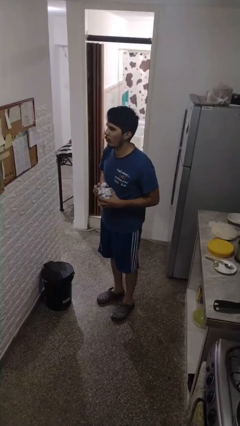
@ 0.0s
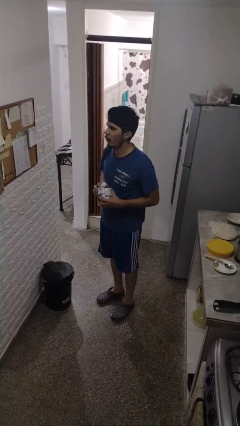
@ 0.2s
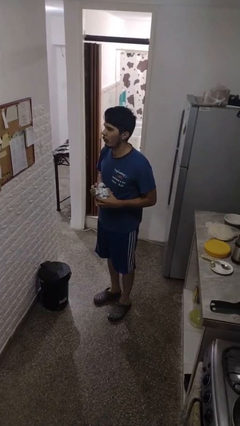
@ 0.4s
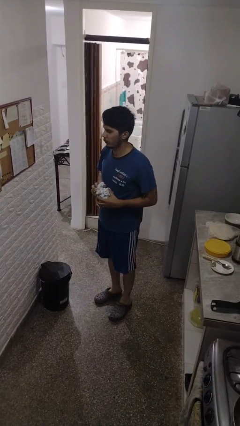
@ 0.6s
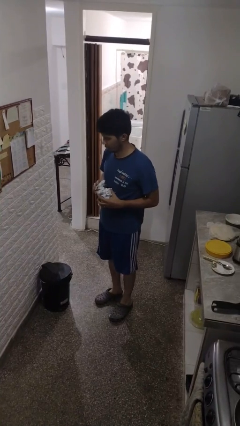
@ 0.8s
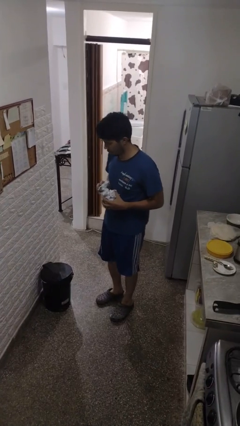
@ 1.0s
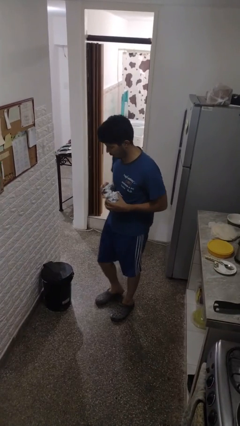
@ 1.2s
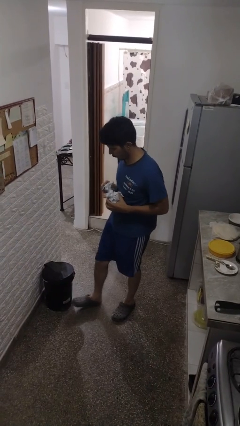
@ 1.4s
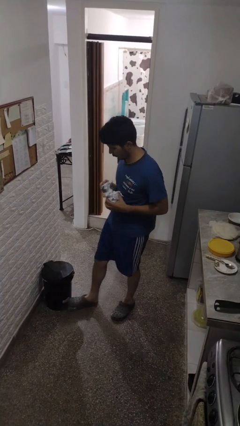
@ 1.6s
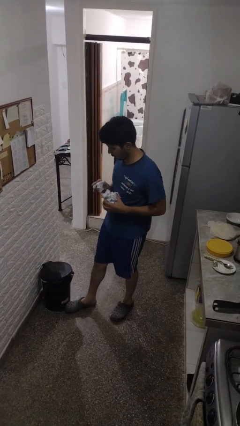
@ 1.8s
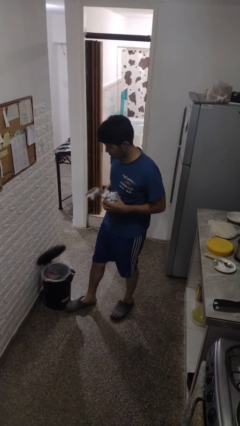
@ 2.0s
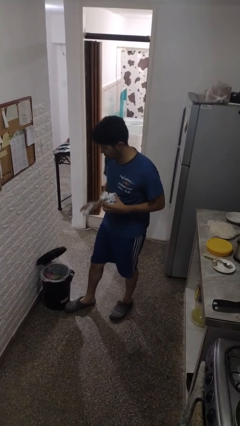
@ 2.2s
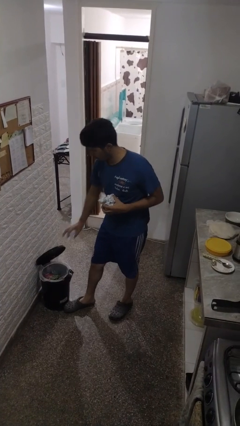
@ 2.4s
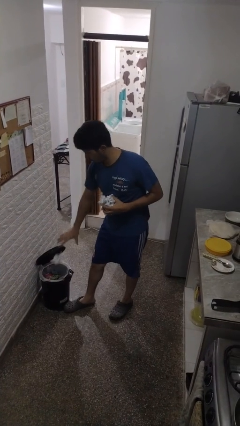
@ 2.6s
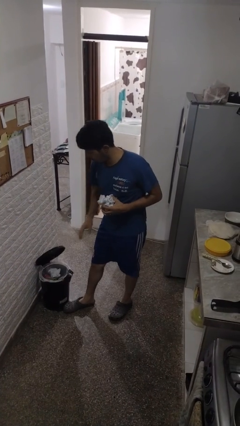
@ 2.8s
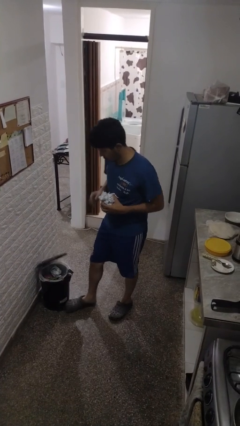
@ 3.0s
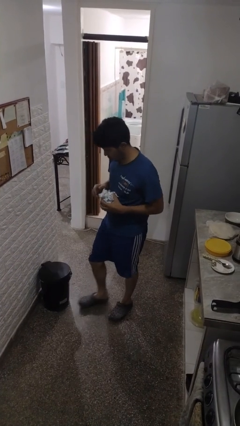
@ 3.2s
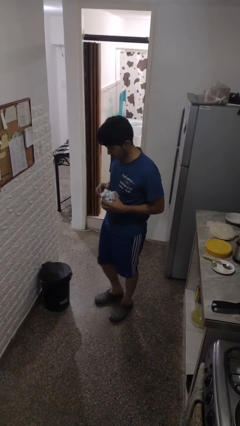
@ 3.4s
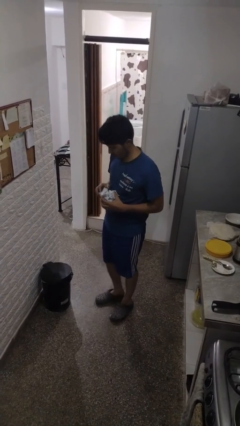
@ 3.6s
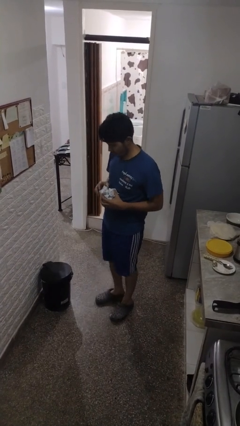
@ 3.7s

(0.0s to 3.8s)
person discards trash

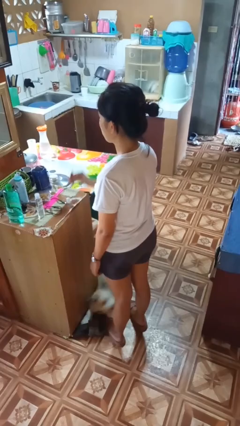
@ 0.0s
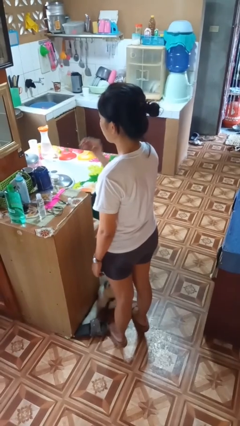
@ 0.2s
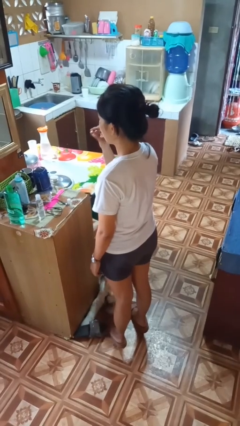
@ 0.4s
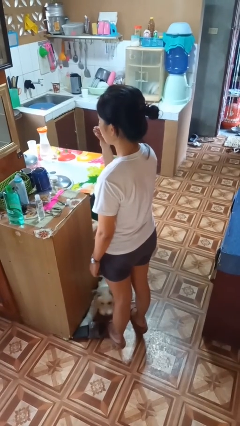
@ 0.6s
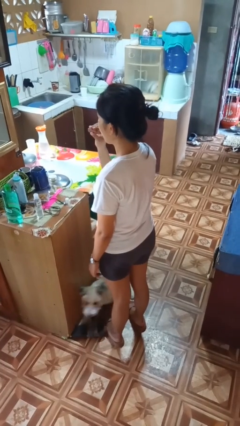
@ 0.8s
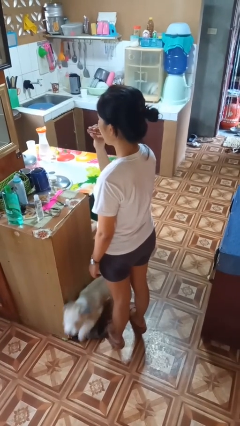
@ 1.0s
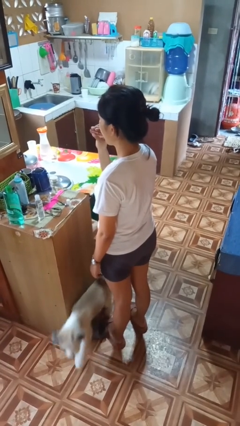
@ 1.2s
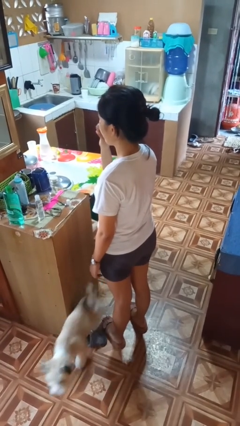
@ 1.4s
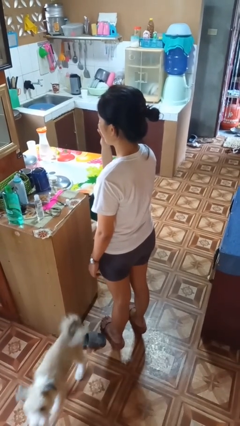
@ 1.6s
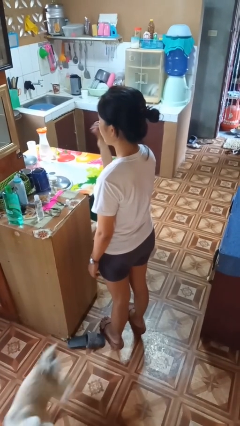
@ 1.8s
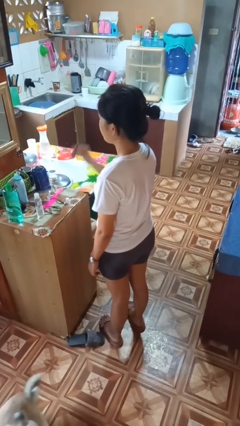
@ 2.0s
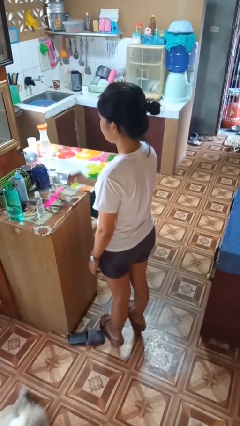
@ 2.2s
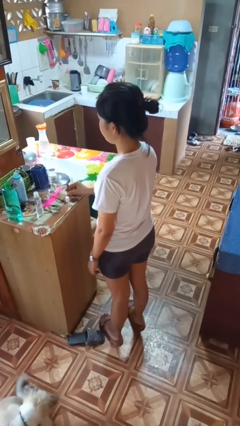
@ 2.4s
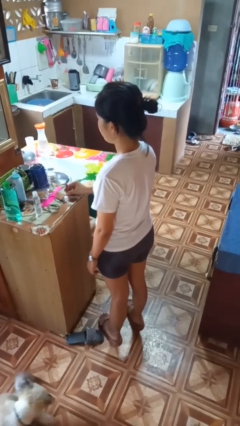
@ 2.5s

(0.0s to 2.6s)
person applies lip makeup

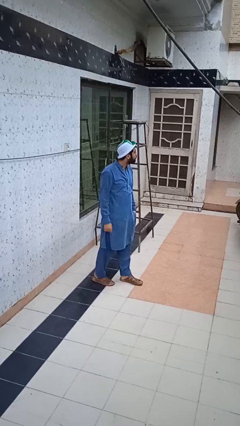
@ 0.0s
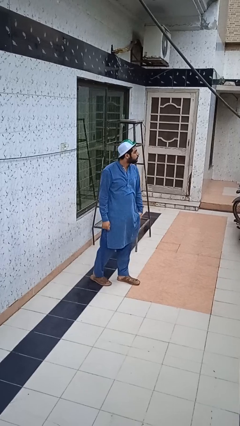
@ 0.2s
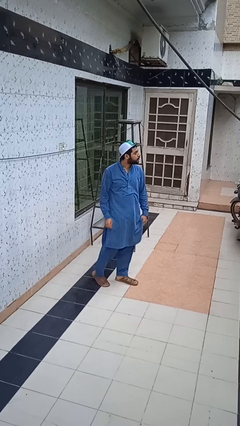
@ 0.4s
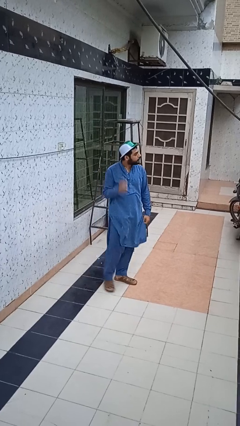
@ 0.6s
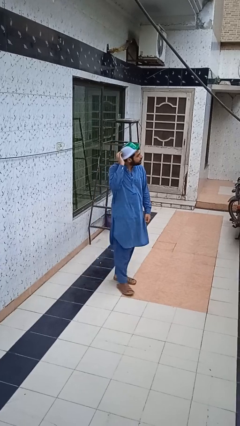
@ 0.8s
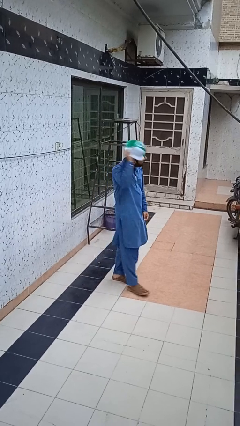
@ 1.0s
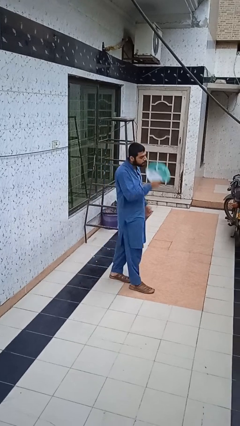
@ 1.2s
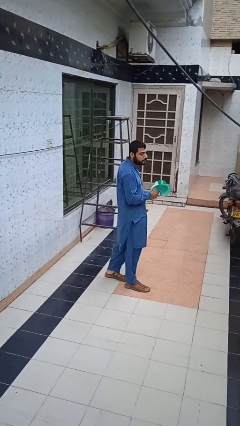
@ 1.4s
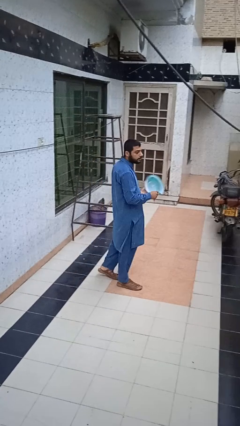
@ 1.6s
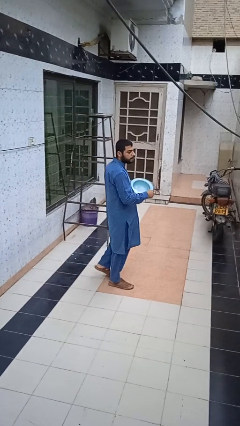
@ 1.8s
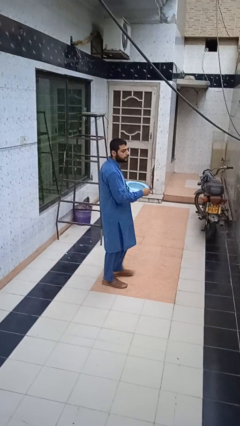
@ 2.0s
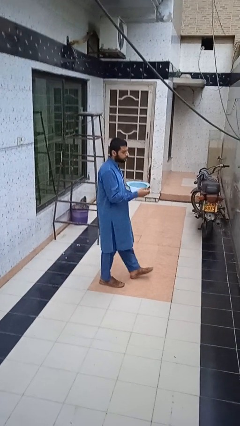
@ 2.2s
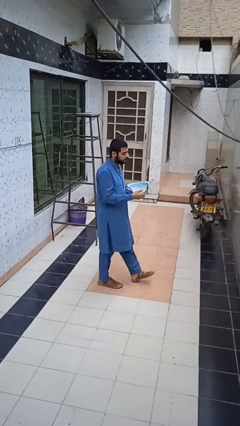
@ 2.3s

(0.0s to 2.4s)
person takes off hat

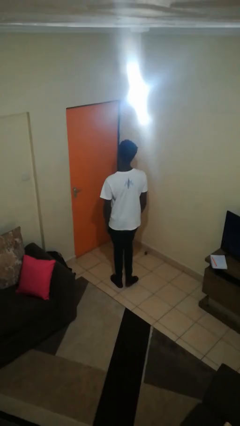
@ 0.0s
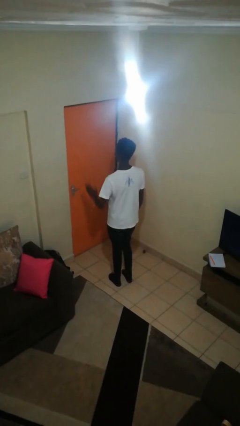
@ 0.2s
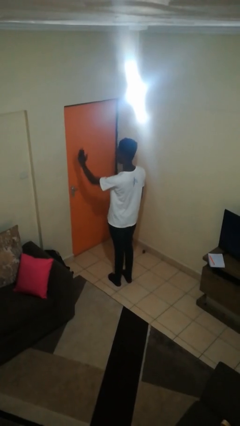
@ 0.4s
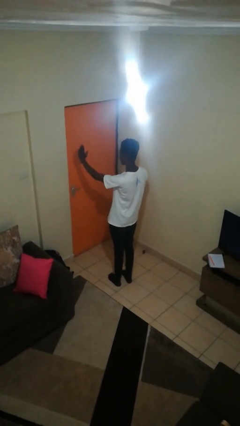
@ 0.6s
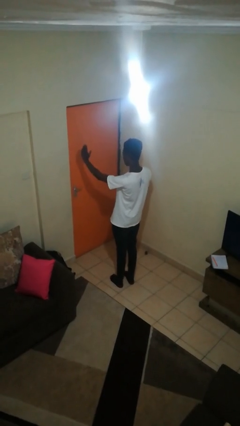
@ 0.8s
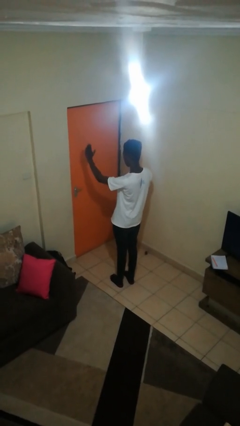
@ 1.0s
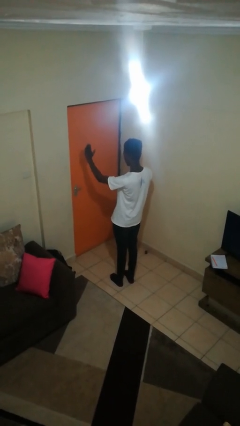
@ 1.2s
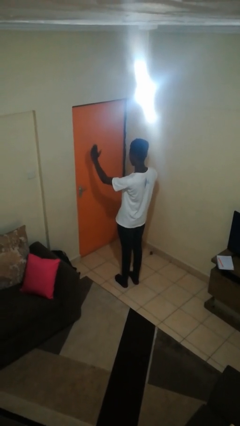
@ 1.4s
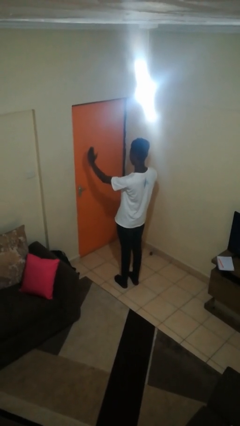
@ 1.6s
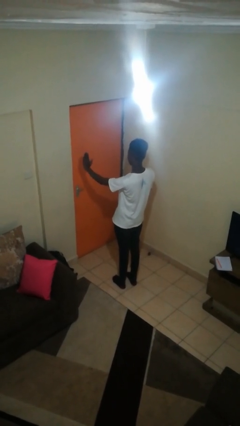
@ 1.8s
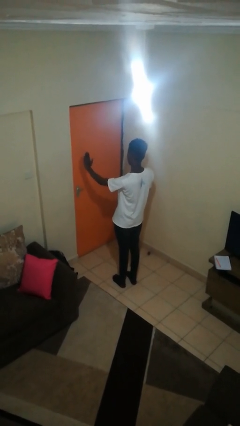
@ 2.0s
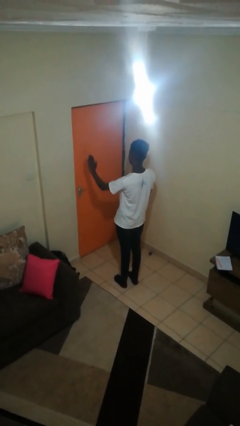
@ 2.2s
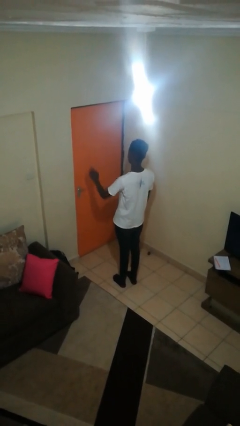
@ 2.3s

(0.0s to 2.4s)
person gestures stop

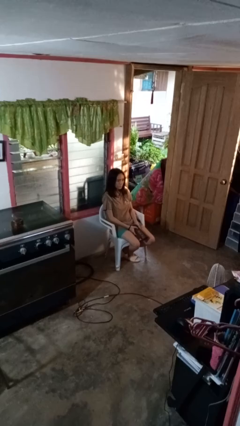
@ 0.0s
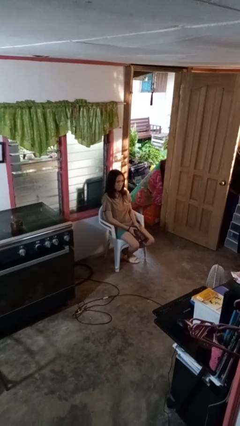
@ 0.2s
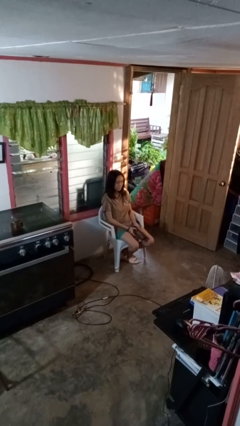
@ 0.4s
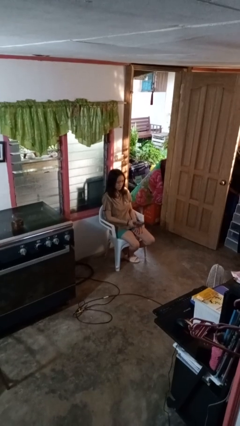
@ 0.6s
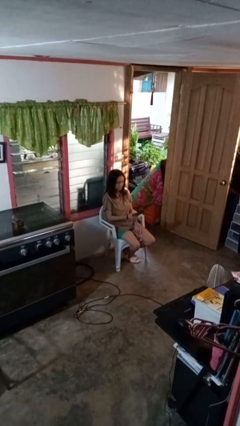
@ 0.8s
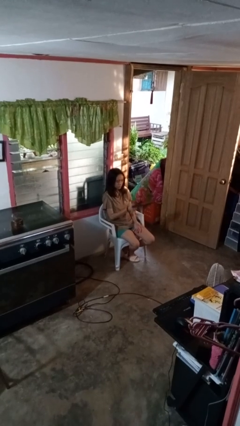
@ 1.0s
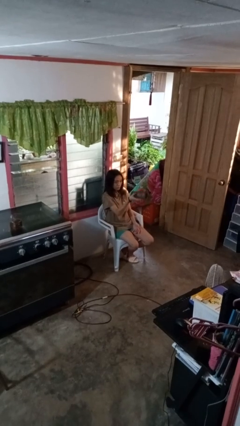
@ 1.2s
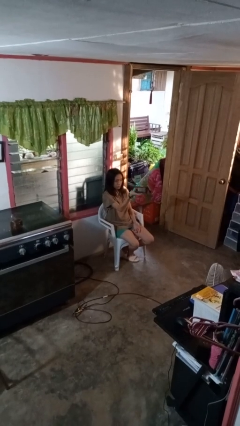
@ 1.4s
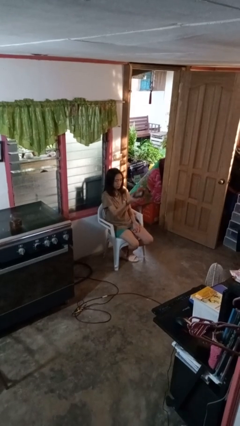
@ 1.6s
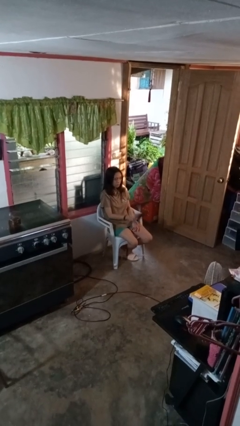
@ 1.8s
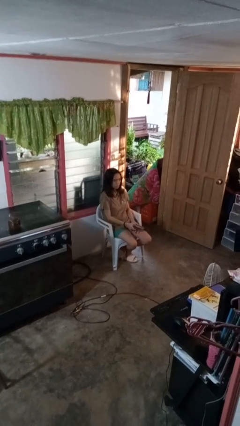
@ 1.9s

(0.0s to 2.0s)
person uses television remote

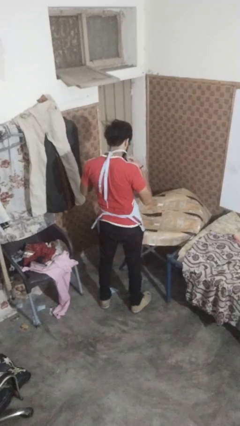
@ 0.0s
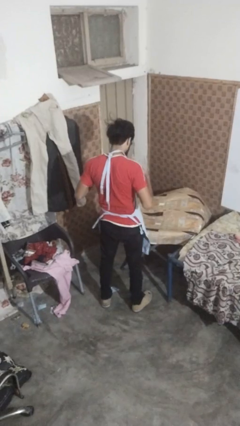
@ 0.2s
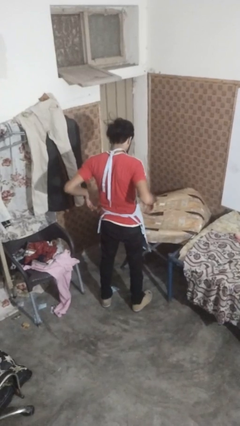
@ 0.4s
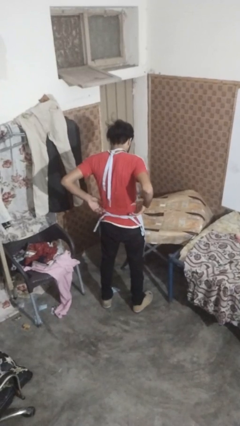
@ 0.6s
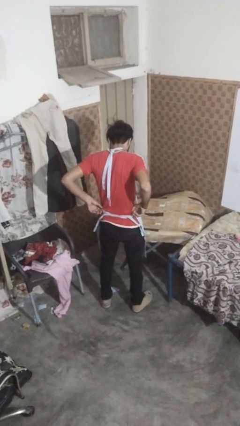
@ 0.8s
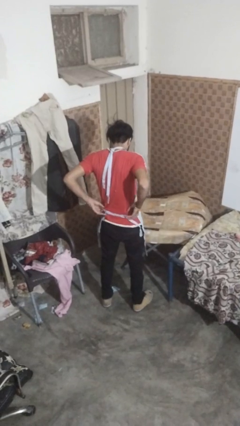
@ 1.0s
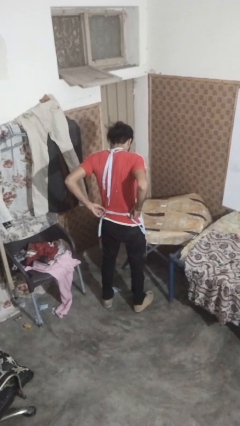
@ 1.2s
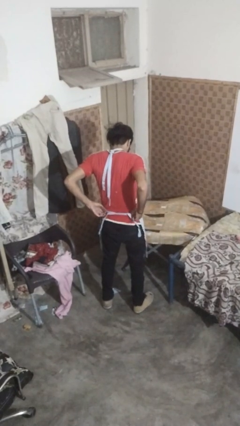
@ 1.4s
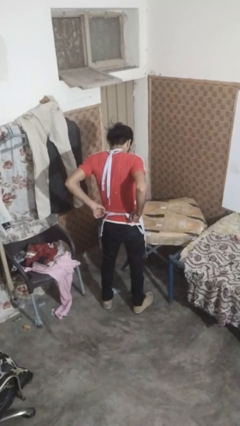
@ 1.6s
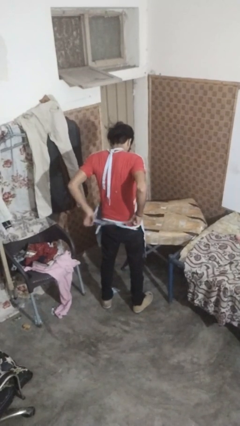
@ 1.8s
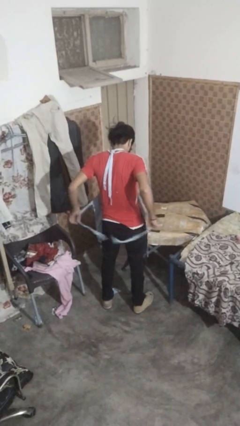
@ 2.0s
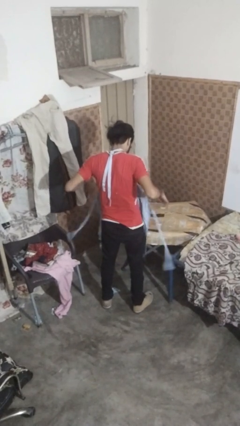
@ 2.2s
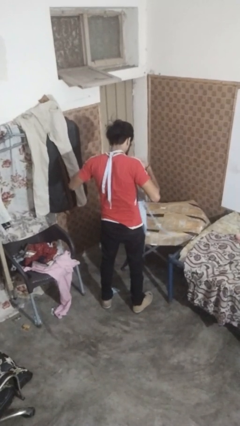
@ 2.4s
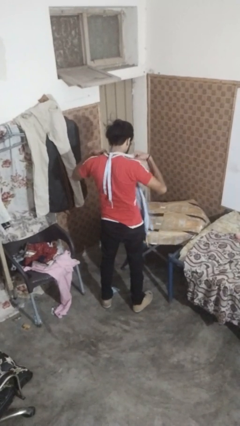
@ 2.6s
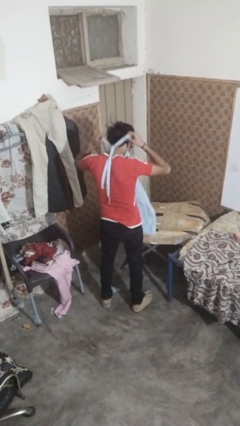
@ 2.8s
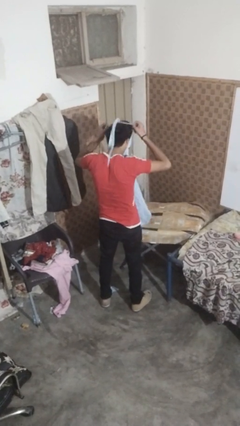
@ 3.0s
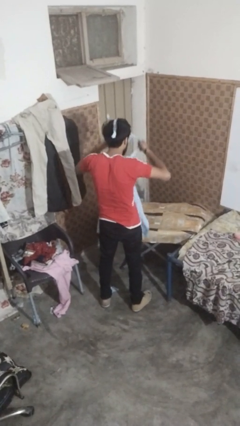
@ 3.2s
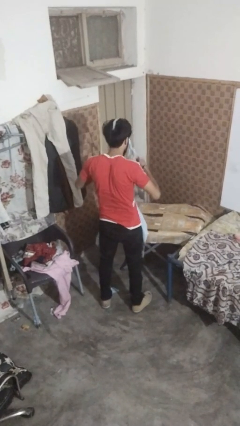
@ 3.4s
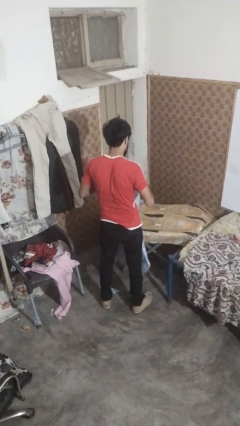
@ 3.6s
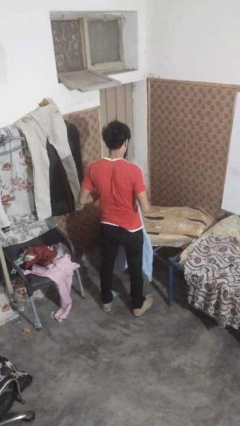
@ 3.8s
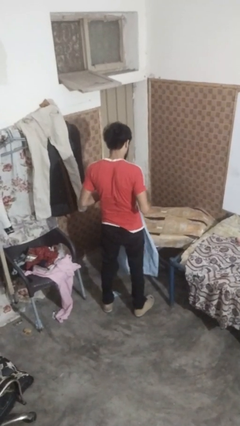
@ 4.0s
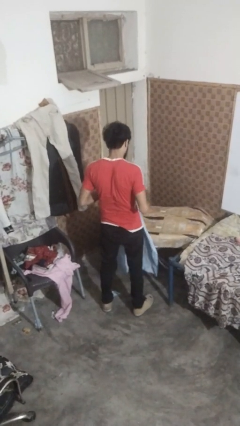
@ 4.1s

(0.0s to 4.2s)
person takes off apron
